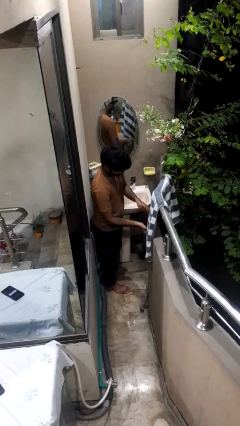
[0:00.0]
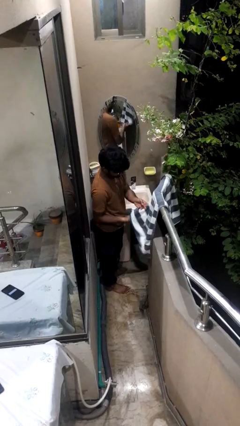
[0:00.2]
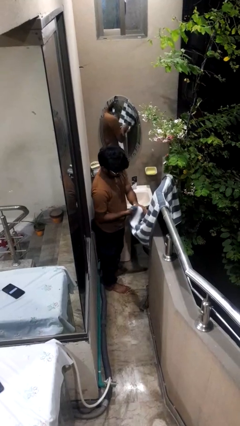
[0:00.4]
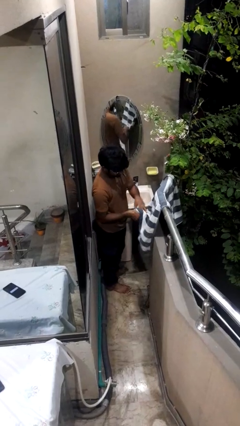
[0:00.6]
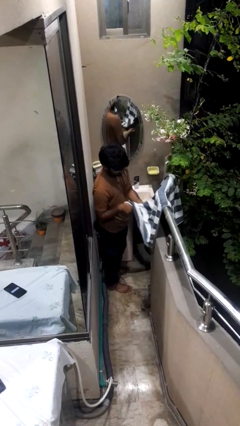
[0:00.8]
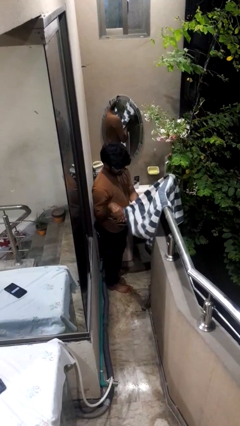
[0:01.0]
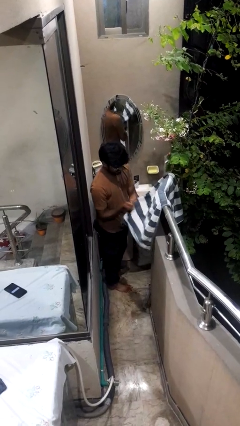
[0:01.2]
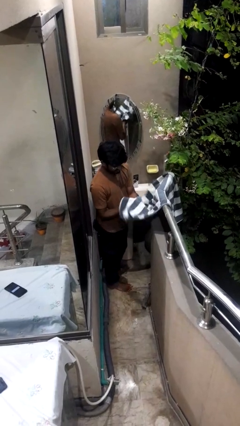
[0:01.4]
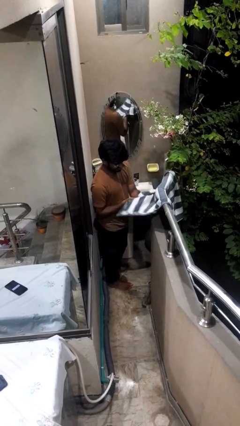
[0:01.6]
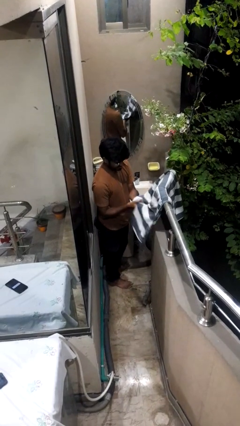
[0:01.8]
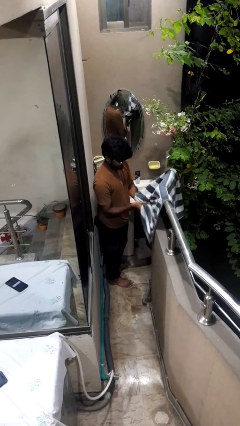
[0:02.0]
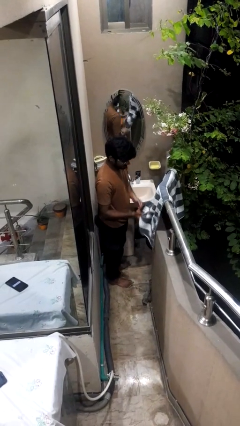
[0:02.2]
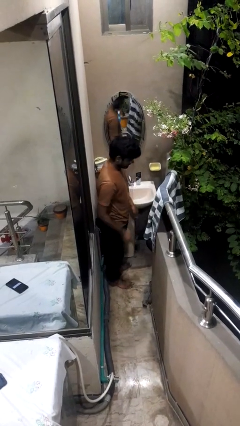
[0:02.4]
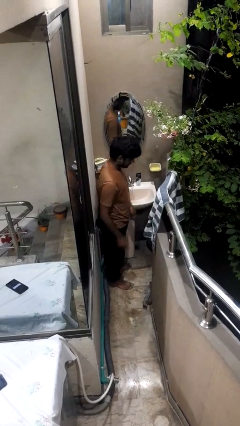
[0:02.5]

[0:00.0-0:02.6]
person dries hands with towel

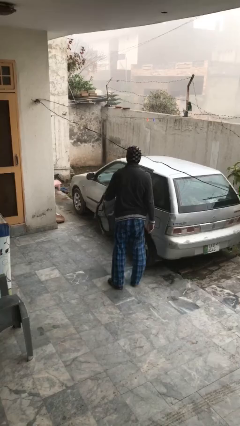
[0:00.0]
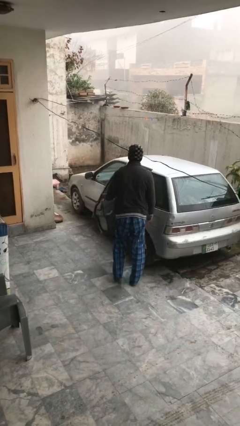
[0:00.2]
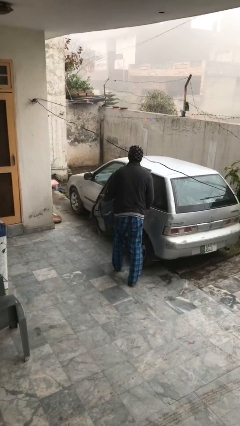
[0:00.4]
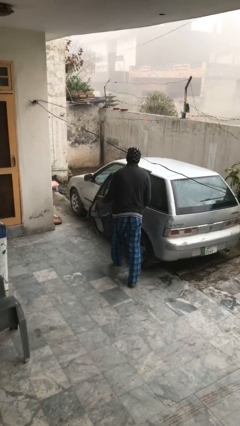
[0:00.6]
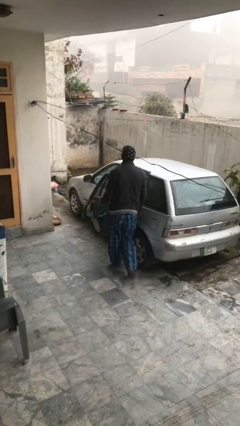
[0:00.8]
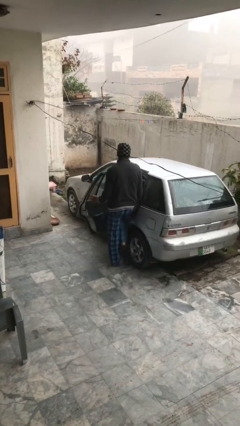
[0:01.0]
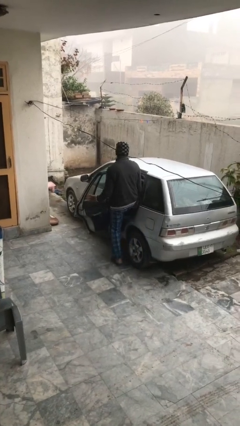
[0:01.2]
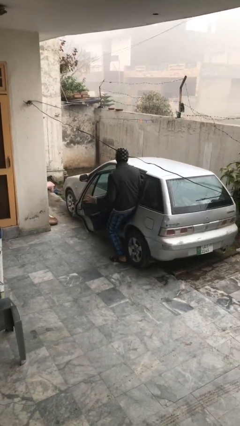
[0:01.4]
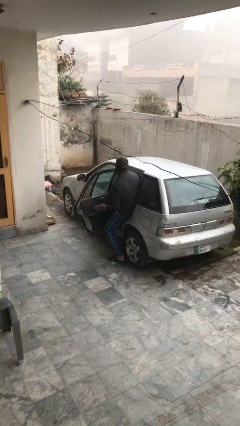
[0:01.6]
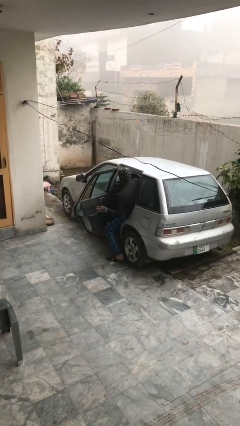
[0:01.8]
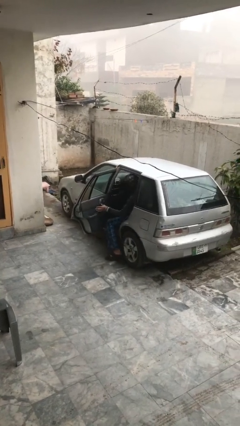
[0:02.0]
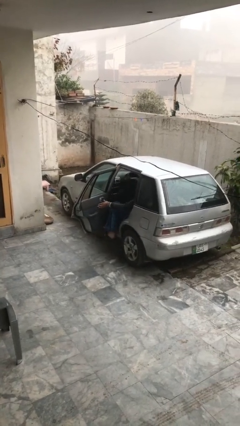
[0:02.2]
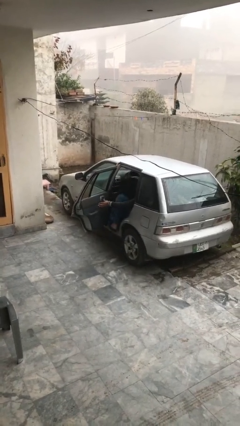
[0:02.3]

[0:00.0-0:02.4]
person enters car

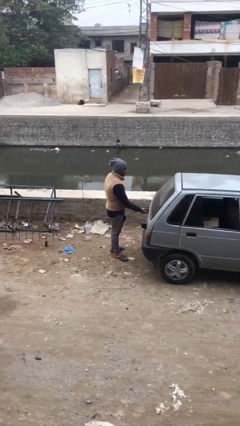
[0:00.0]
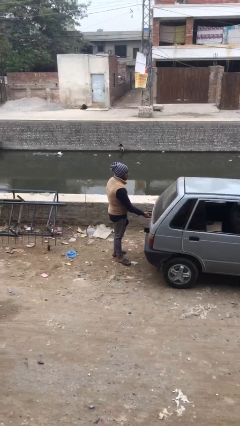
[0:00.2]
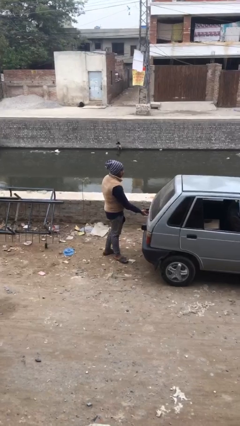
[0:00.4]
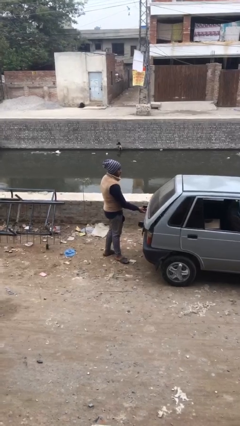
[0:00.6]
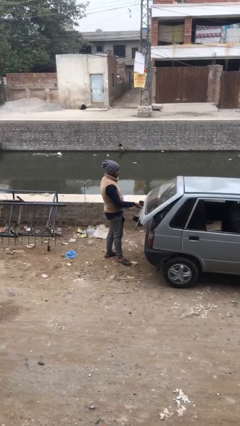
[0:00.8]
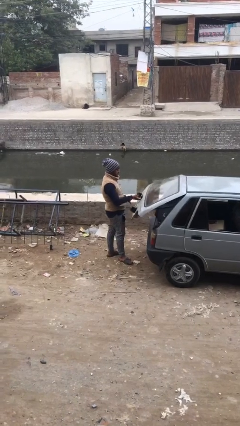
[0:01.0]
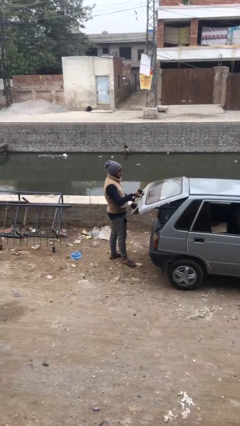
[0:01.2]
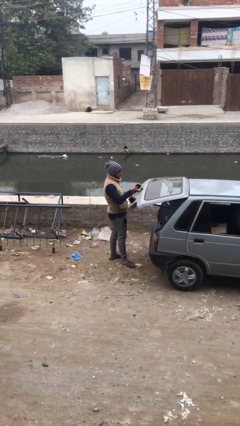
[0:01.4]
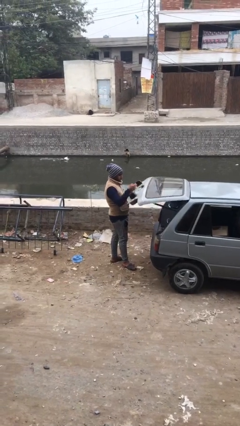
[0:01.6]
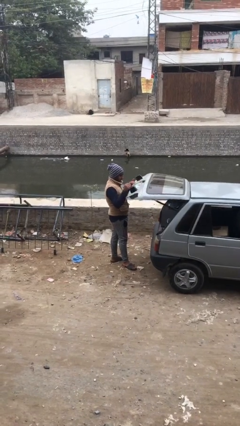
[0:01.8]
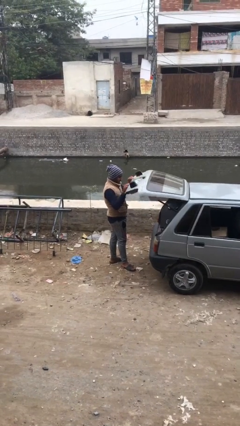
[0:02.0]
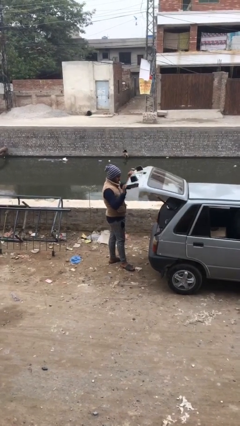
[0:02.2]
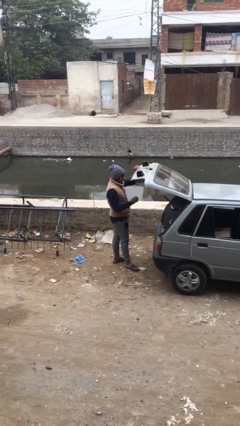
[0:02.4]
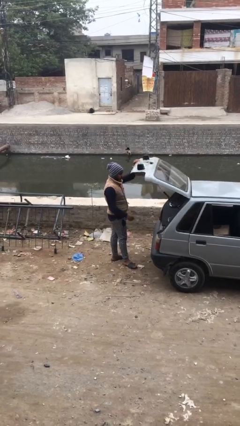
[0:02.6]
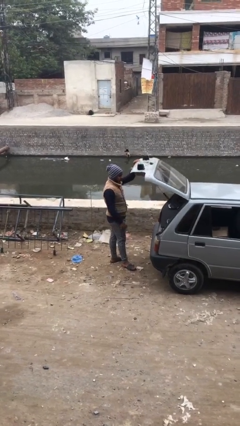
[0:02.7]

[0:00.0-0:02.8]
person opens car trunk

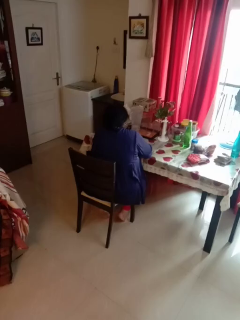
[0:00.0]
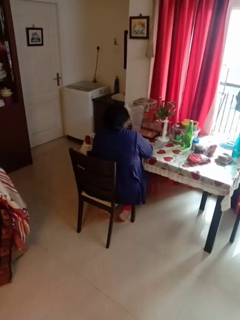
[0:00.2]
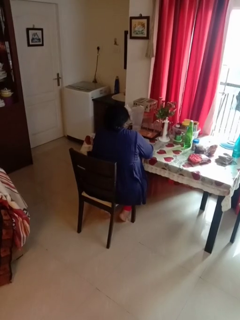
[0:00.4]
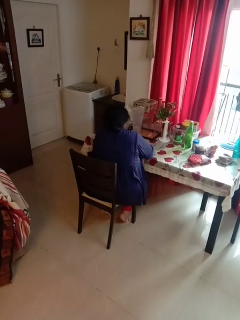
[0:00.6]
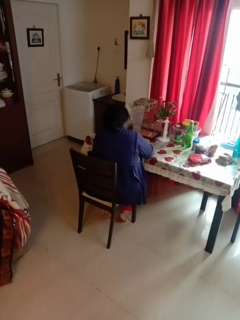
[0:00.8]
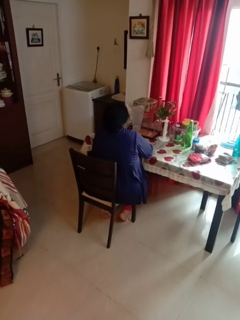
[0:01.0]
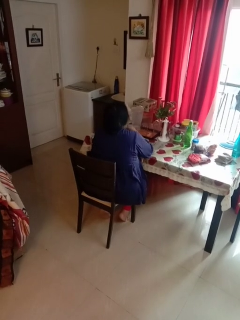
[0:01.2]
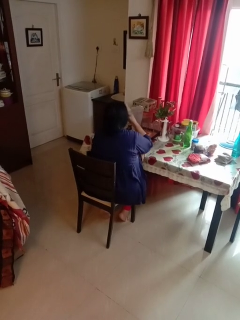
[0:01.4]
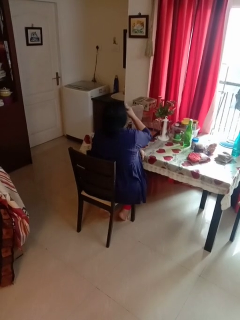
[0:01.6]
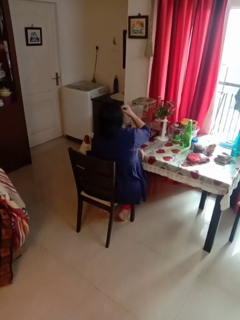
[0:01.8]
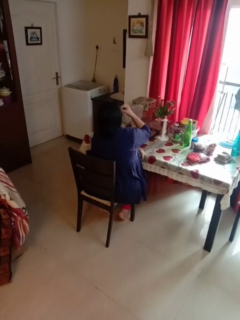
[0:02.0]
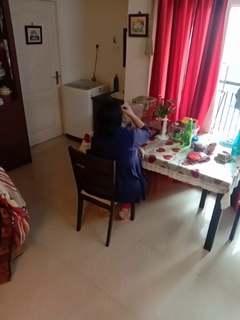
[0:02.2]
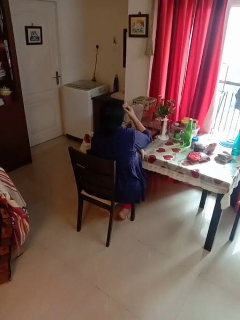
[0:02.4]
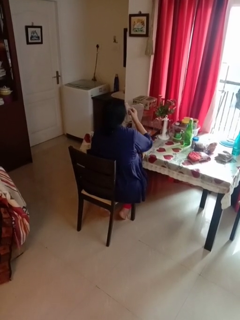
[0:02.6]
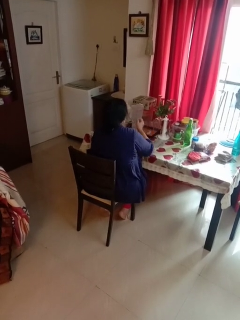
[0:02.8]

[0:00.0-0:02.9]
person eats with hands

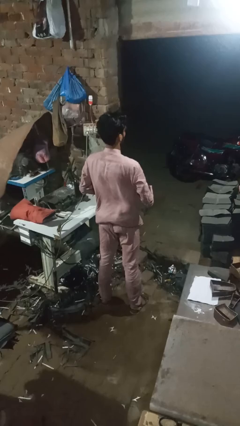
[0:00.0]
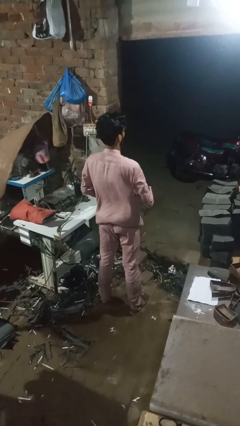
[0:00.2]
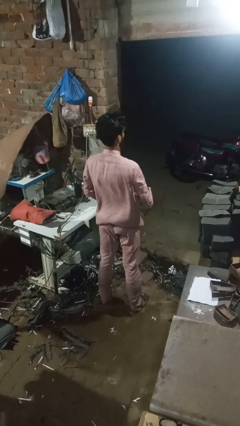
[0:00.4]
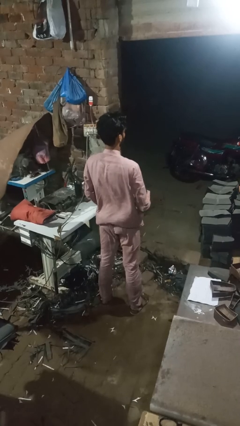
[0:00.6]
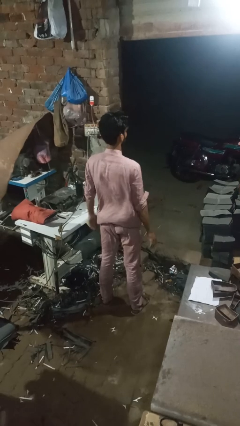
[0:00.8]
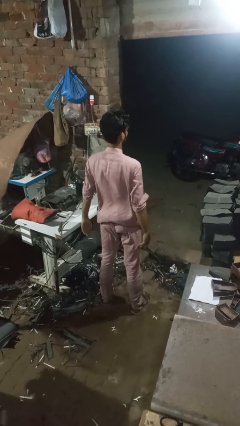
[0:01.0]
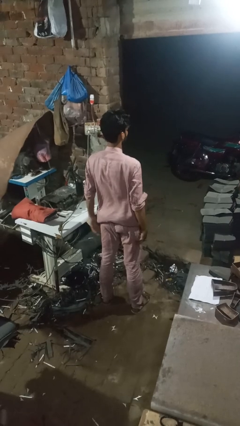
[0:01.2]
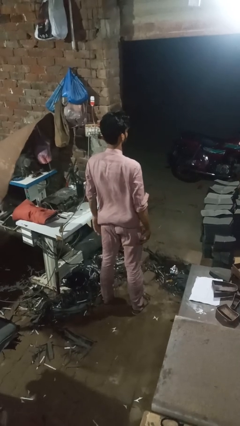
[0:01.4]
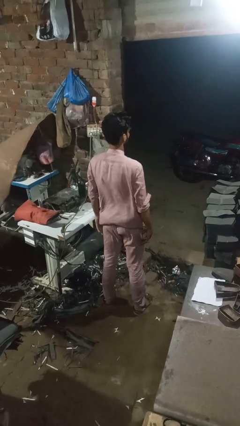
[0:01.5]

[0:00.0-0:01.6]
person buttons shirt

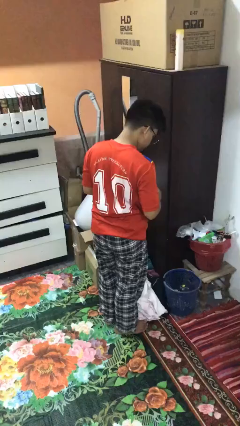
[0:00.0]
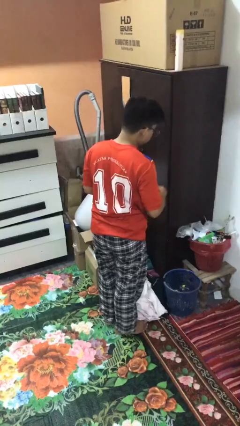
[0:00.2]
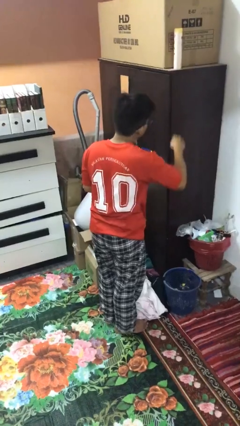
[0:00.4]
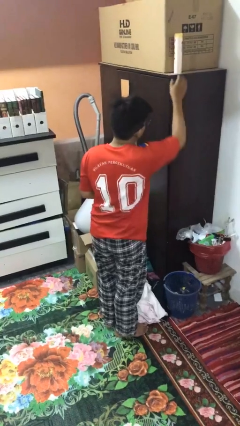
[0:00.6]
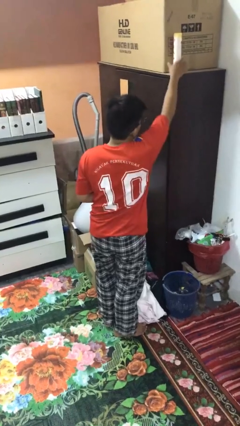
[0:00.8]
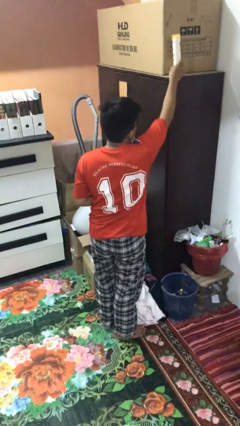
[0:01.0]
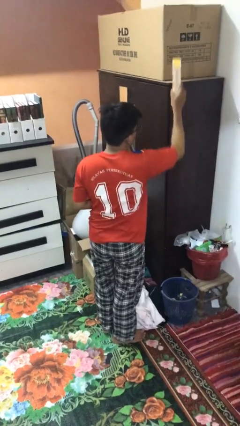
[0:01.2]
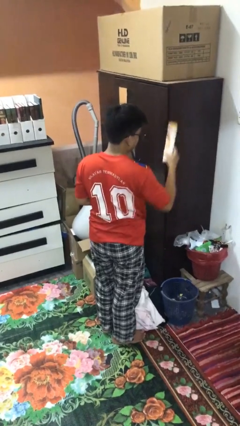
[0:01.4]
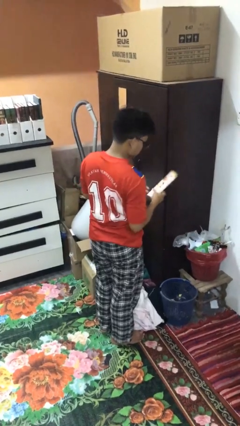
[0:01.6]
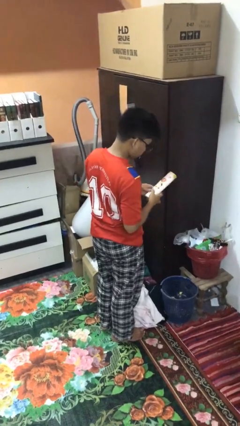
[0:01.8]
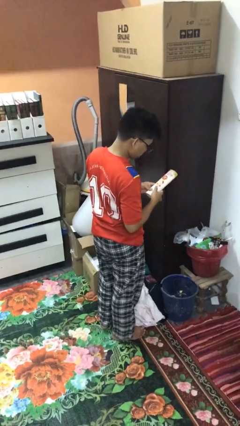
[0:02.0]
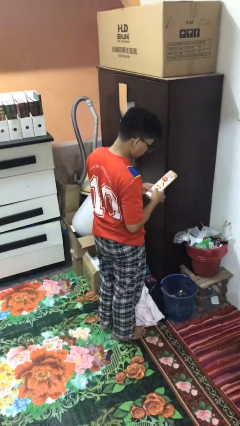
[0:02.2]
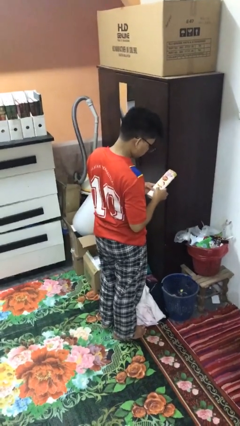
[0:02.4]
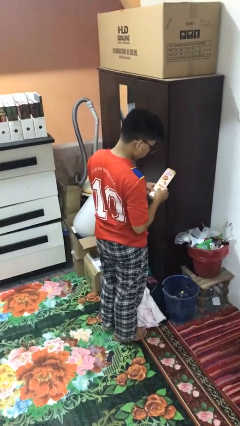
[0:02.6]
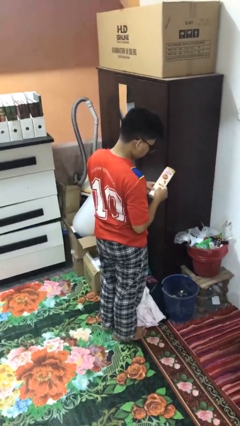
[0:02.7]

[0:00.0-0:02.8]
person picks up object from shelf

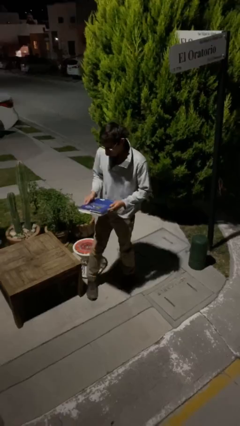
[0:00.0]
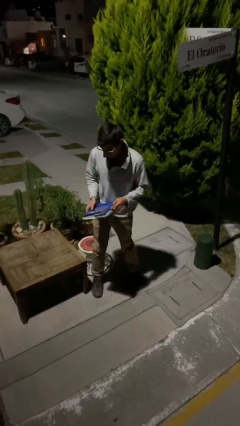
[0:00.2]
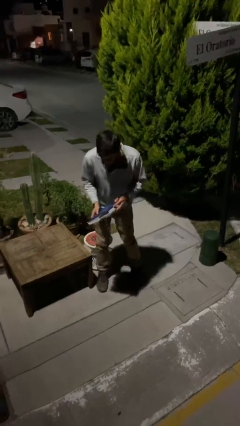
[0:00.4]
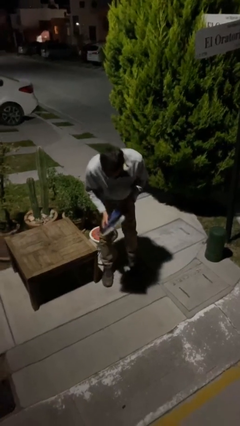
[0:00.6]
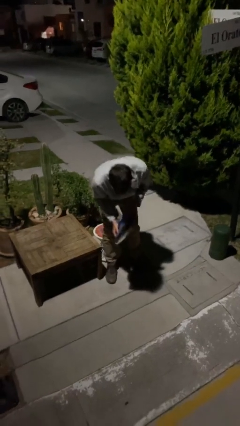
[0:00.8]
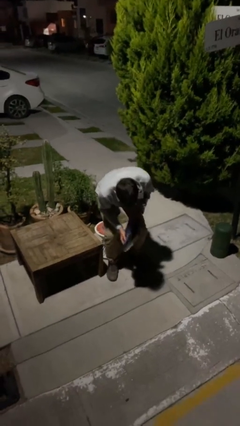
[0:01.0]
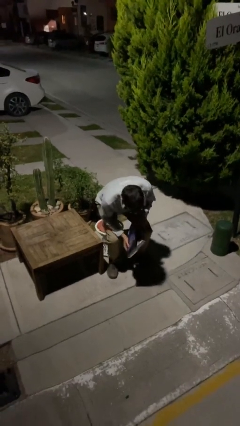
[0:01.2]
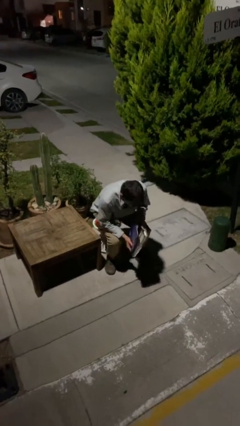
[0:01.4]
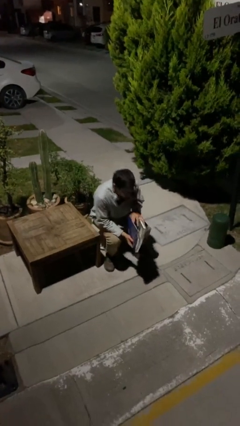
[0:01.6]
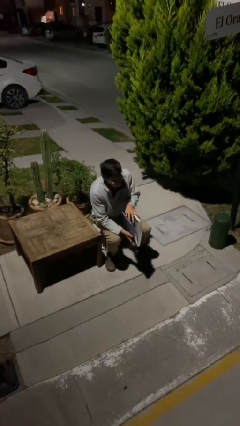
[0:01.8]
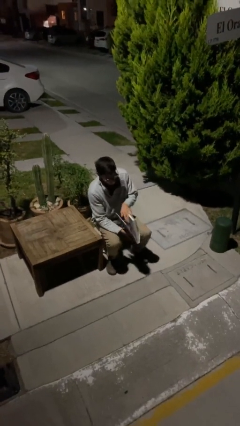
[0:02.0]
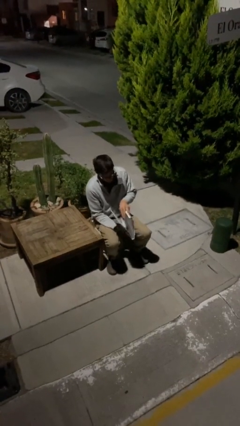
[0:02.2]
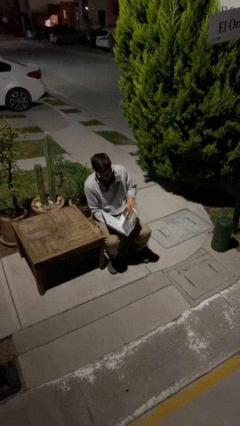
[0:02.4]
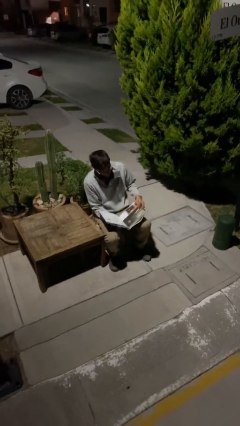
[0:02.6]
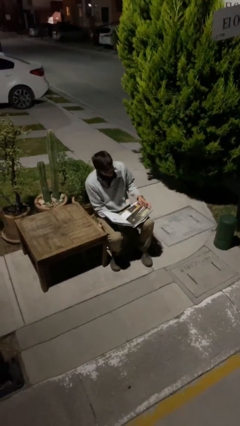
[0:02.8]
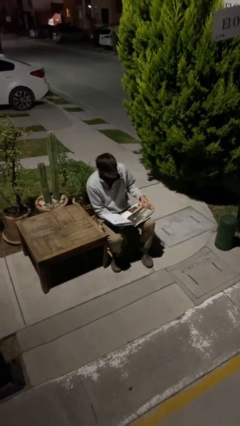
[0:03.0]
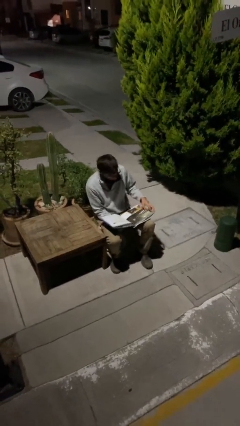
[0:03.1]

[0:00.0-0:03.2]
person sits down
